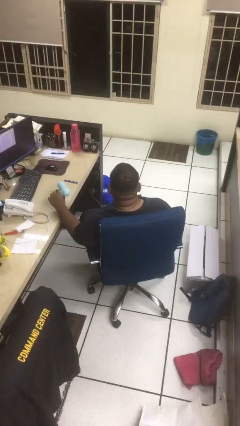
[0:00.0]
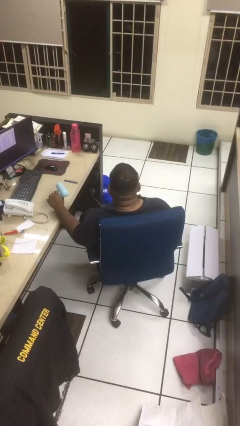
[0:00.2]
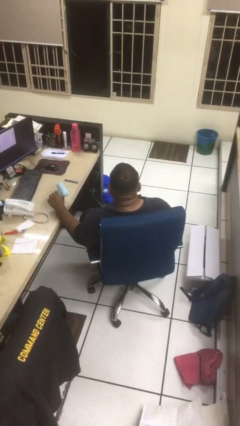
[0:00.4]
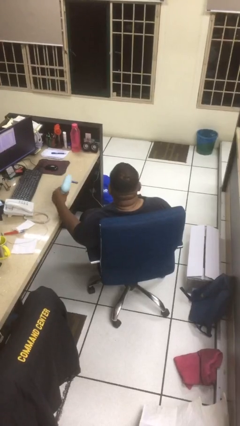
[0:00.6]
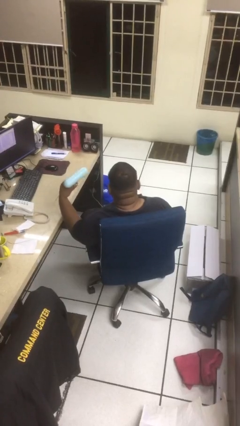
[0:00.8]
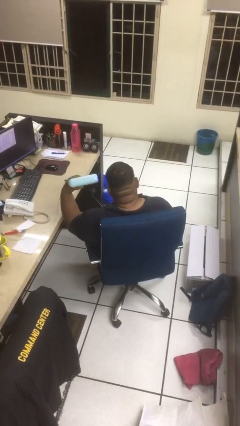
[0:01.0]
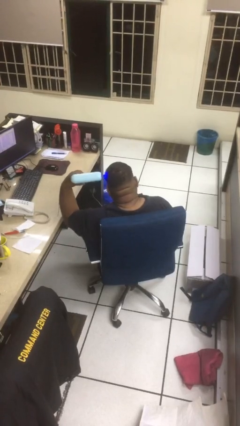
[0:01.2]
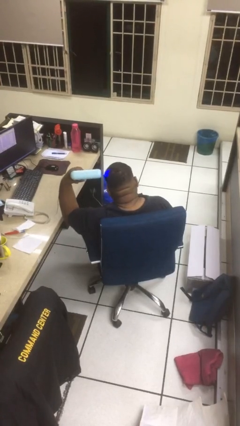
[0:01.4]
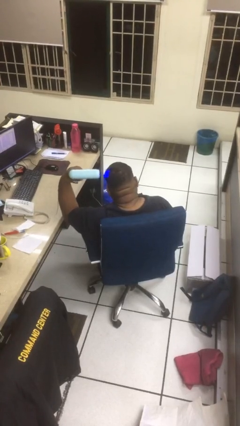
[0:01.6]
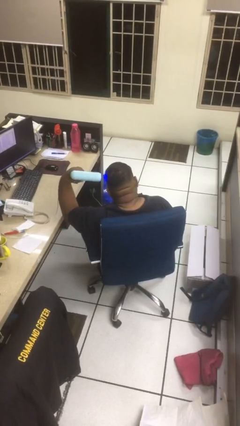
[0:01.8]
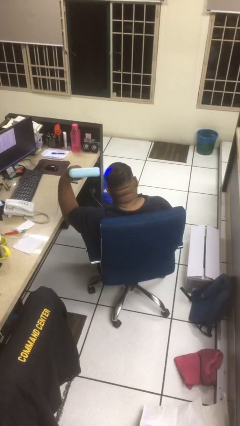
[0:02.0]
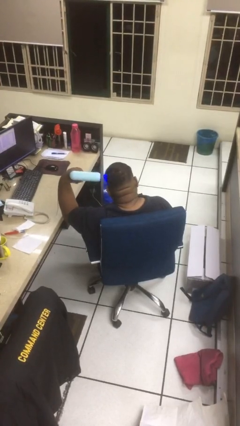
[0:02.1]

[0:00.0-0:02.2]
person dries hair with hairdryer

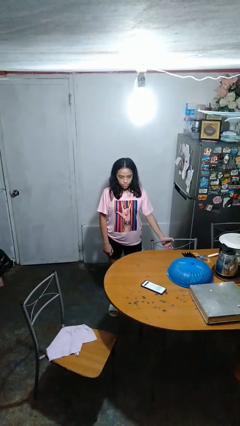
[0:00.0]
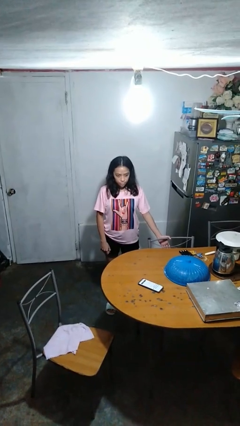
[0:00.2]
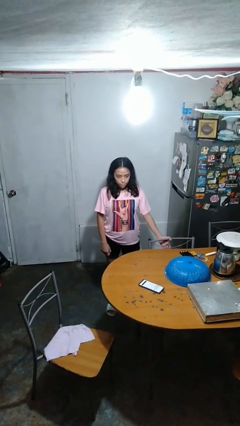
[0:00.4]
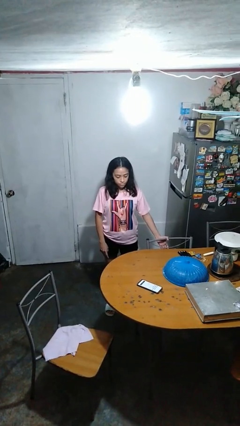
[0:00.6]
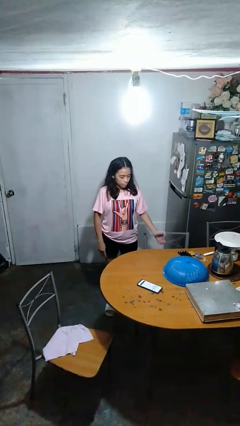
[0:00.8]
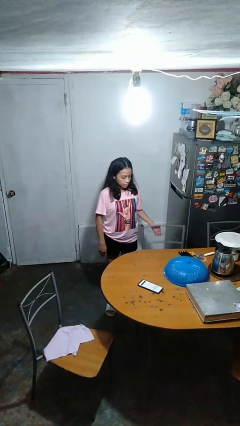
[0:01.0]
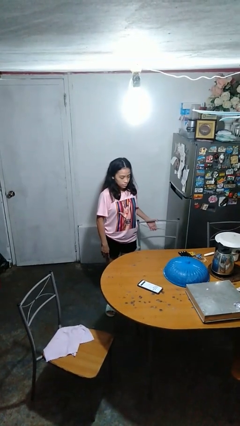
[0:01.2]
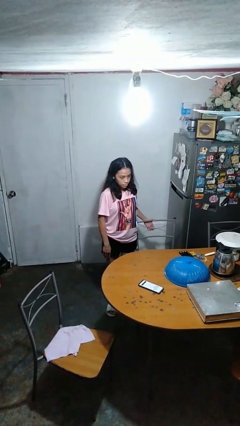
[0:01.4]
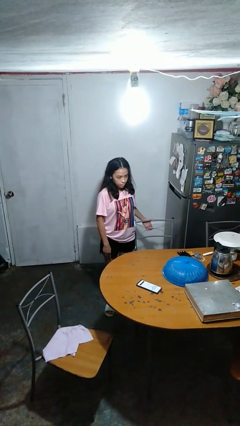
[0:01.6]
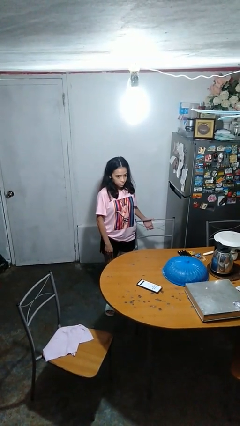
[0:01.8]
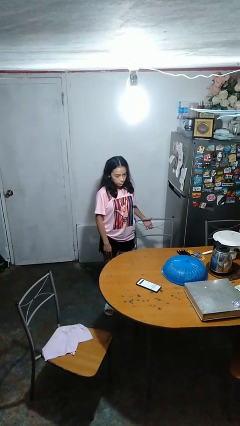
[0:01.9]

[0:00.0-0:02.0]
person pulls out chair

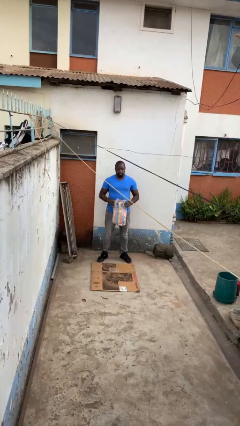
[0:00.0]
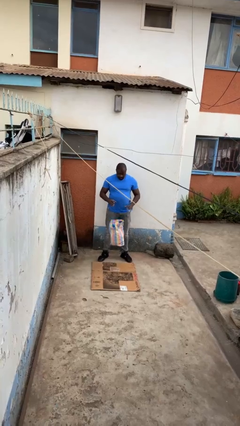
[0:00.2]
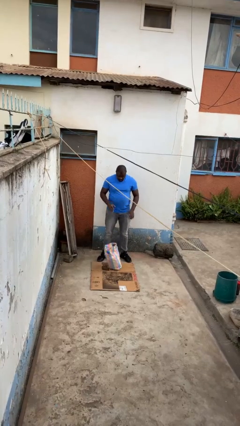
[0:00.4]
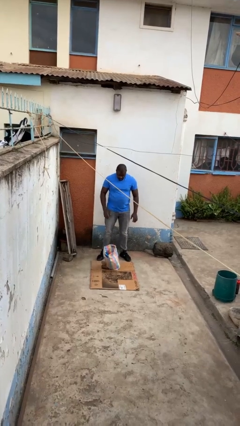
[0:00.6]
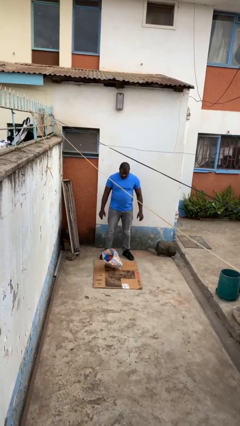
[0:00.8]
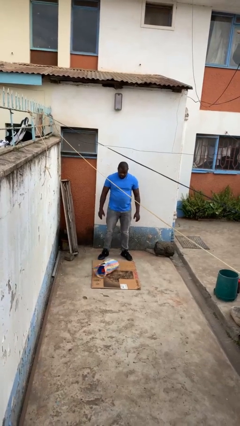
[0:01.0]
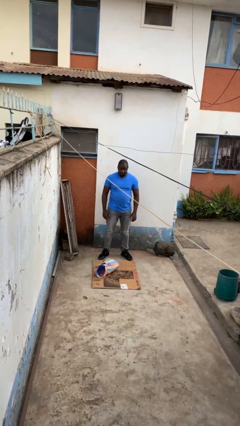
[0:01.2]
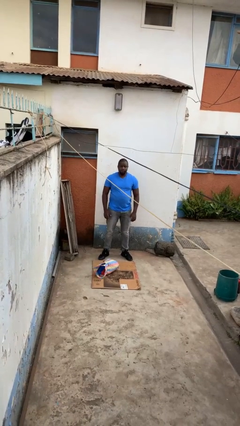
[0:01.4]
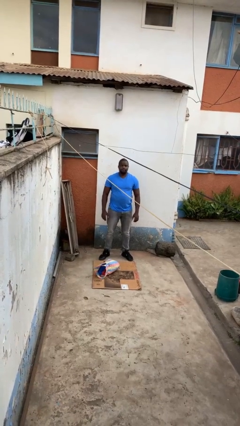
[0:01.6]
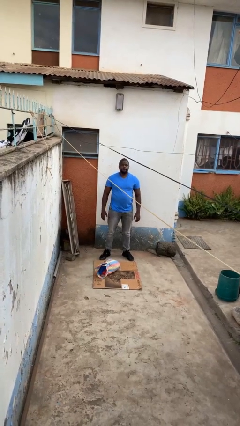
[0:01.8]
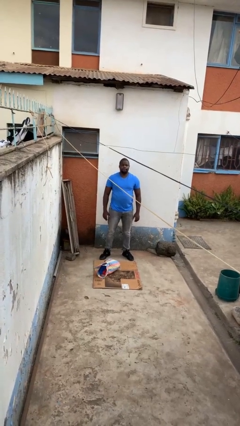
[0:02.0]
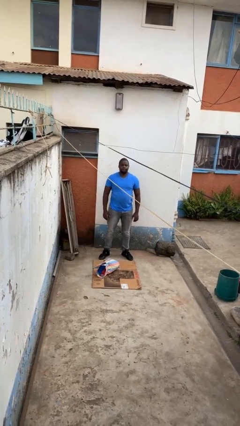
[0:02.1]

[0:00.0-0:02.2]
person drops object

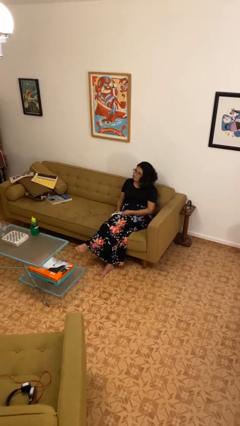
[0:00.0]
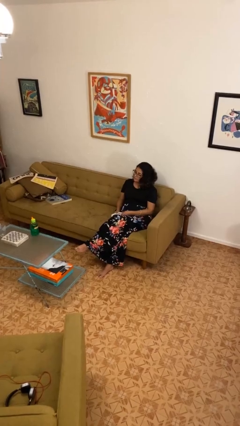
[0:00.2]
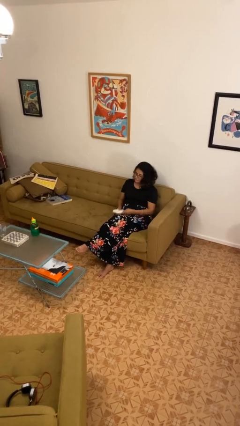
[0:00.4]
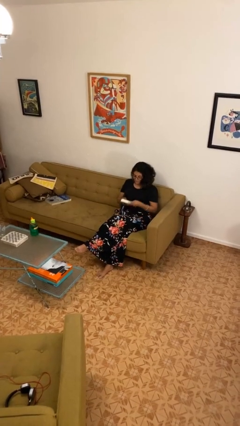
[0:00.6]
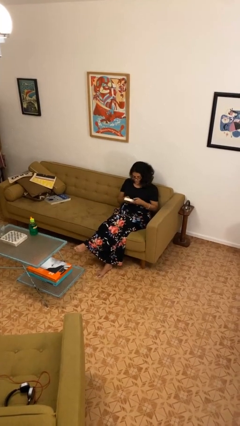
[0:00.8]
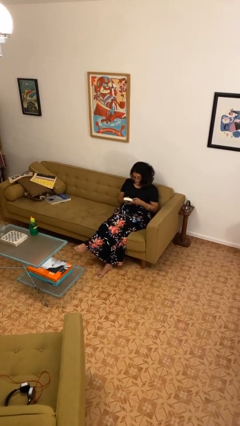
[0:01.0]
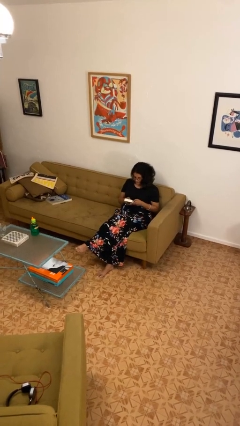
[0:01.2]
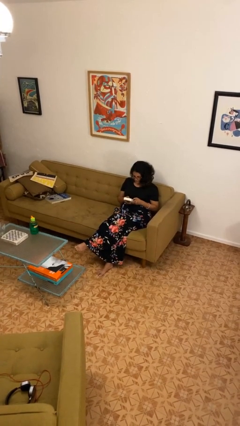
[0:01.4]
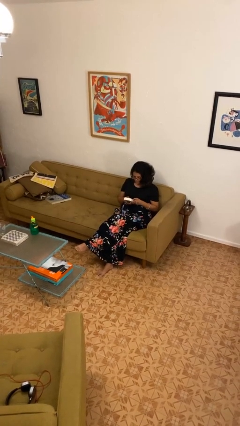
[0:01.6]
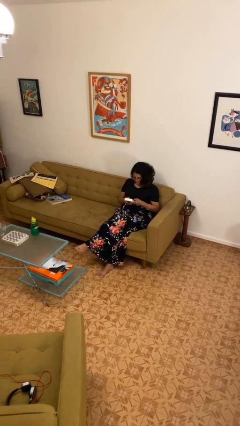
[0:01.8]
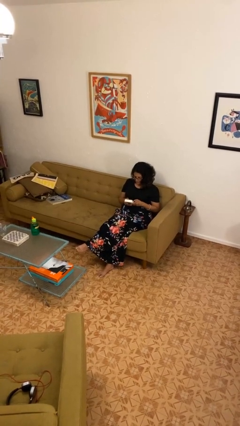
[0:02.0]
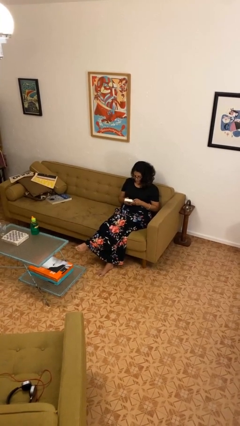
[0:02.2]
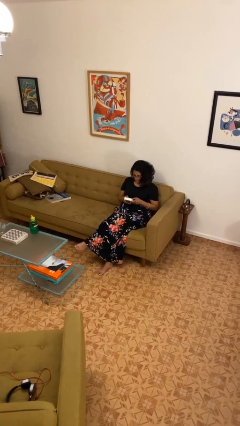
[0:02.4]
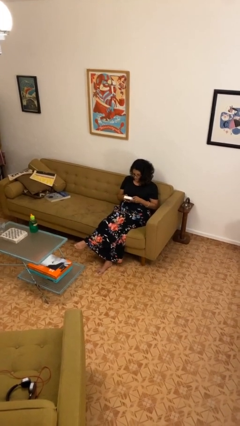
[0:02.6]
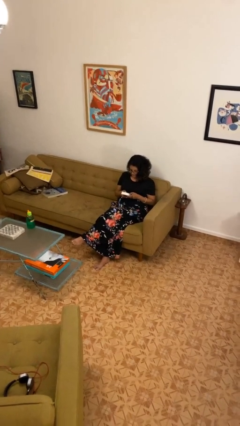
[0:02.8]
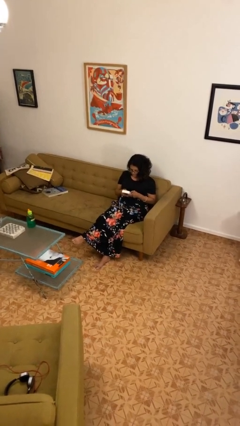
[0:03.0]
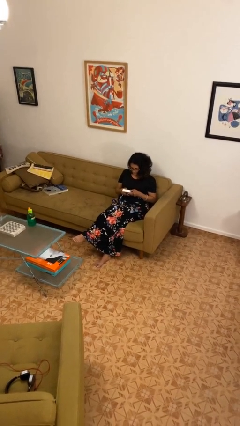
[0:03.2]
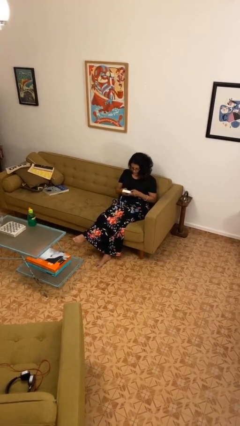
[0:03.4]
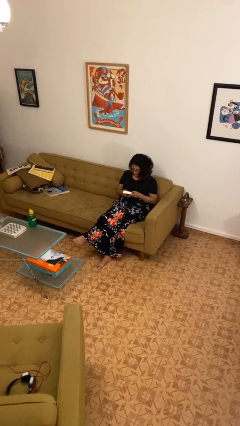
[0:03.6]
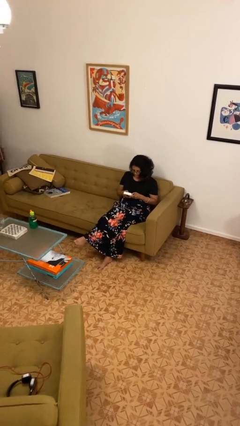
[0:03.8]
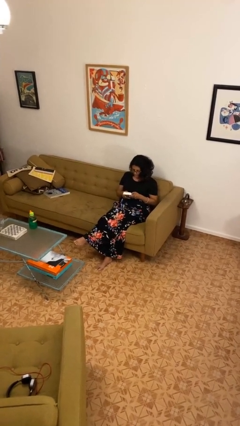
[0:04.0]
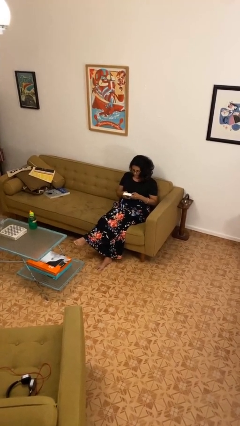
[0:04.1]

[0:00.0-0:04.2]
person interacts with handheld game

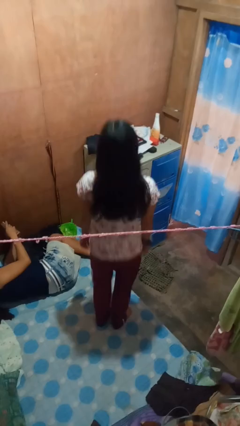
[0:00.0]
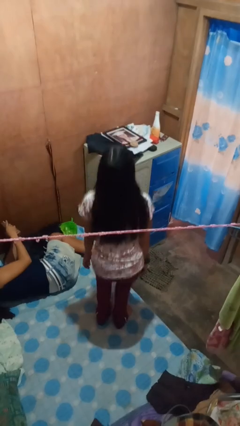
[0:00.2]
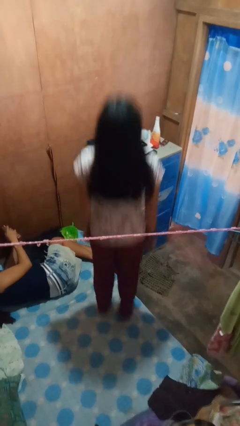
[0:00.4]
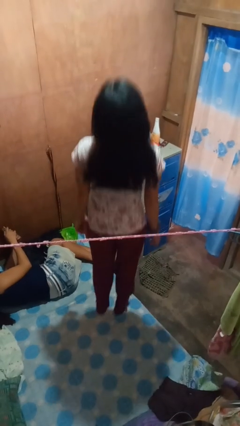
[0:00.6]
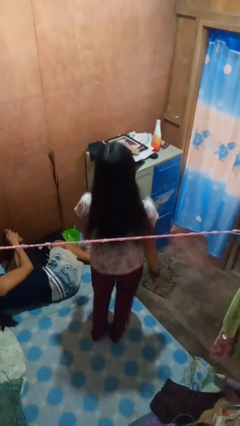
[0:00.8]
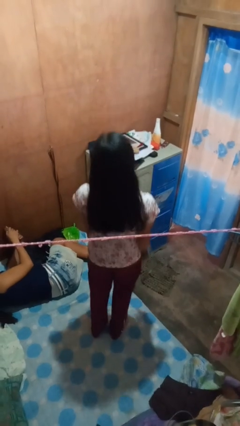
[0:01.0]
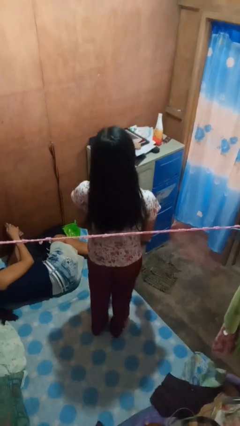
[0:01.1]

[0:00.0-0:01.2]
person jumps on bed

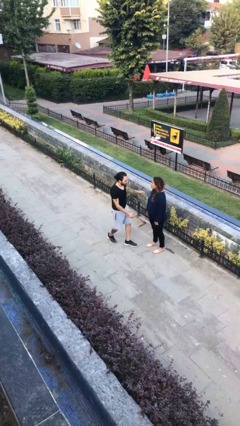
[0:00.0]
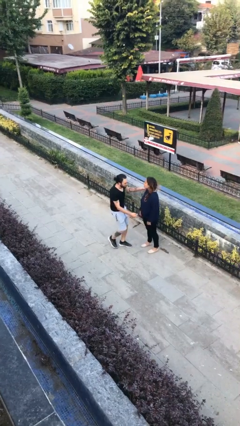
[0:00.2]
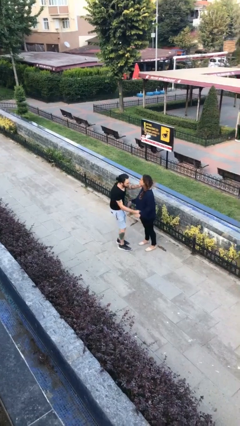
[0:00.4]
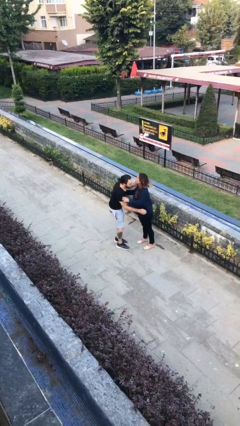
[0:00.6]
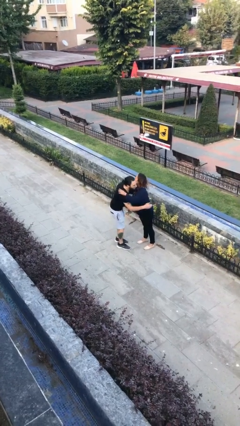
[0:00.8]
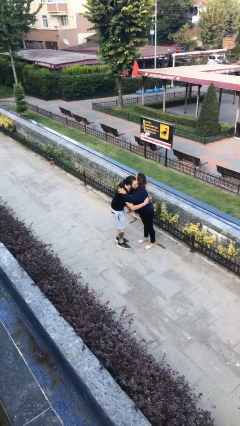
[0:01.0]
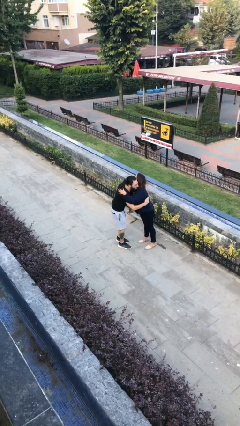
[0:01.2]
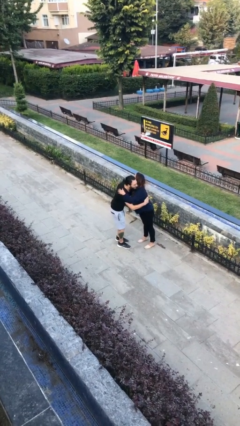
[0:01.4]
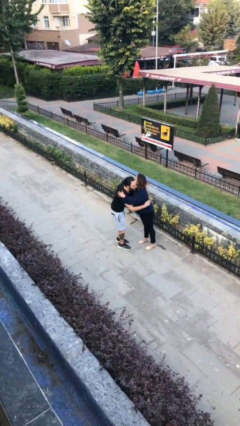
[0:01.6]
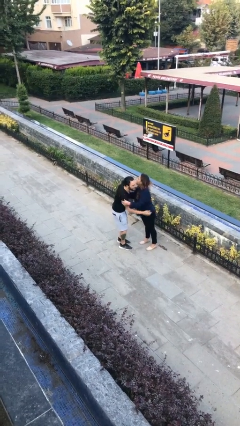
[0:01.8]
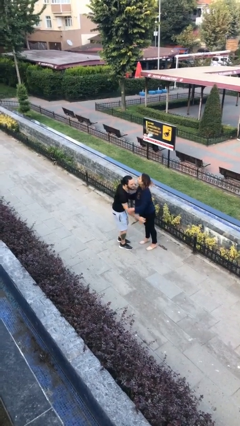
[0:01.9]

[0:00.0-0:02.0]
person embraces person

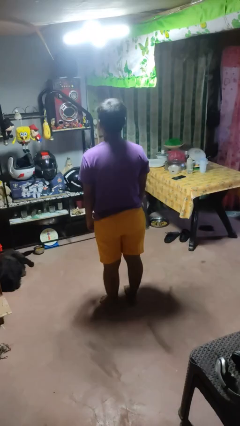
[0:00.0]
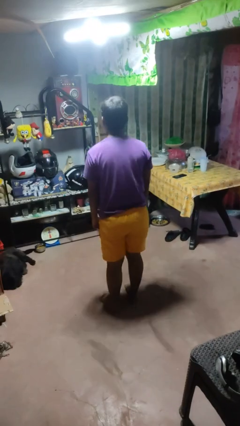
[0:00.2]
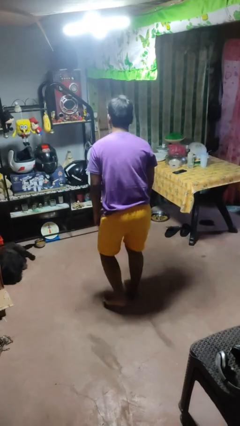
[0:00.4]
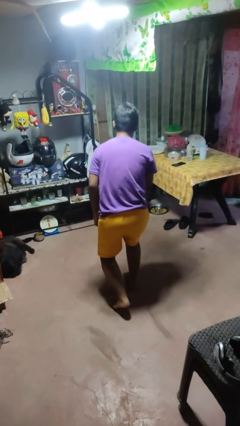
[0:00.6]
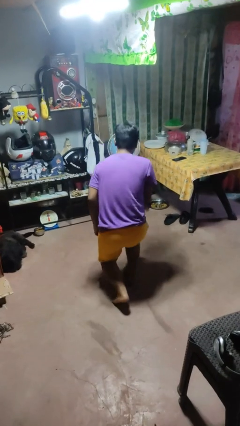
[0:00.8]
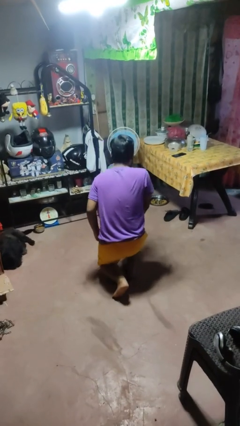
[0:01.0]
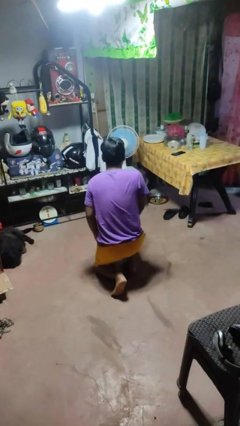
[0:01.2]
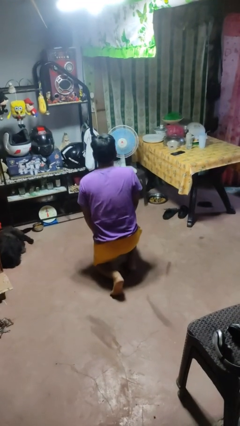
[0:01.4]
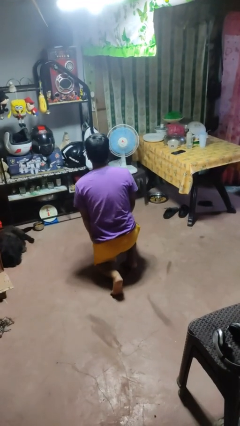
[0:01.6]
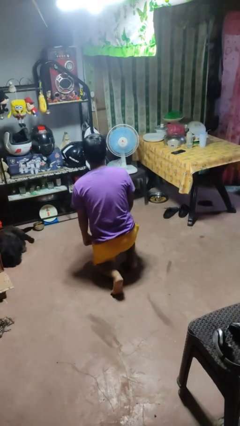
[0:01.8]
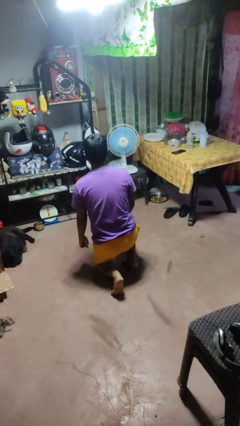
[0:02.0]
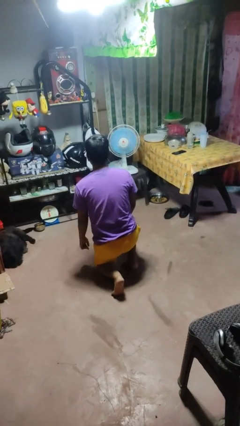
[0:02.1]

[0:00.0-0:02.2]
person kneels

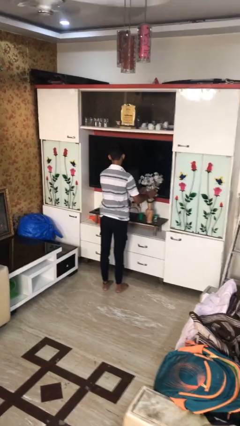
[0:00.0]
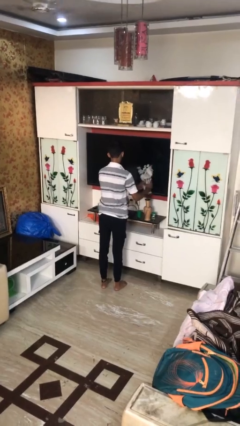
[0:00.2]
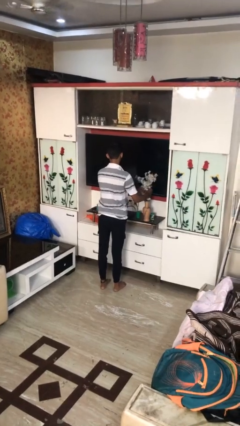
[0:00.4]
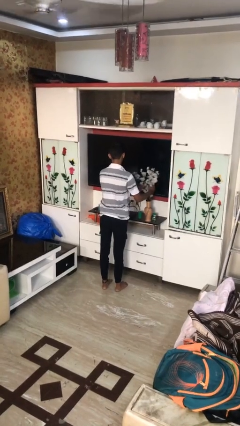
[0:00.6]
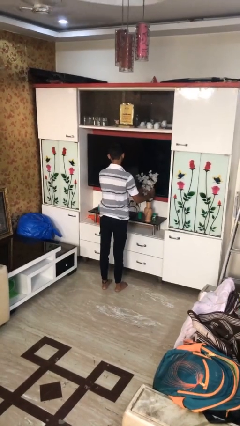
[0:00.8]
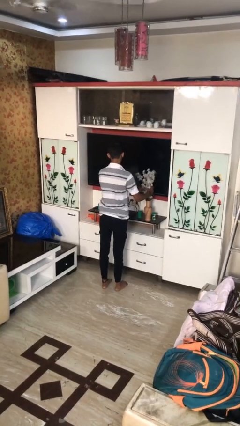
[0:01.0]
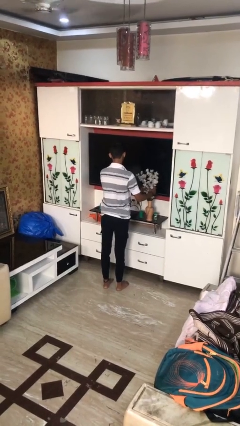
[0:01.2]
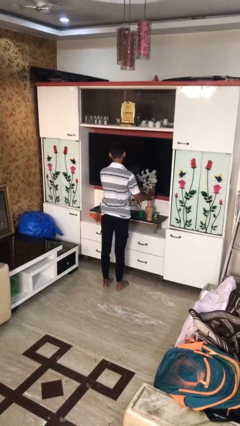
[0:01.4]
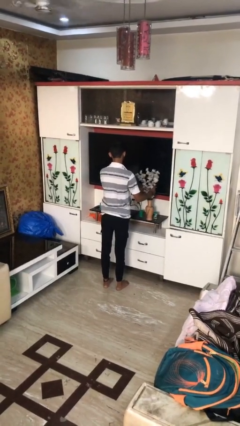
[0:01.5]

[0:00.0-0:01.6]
person arranges flowers in vase
